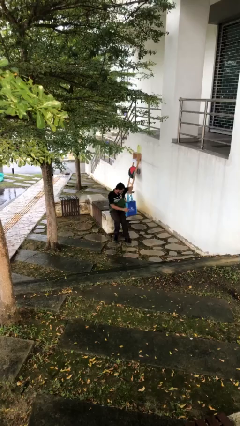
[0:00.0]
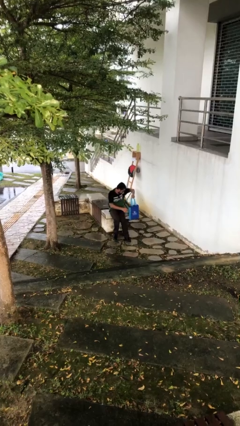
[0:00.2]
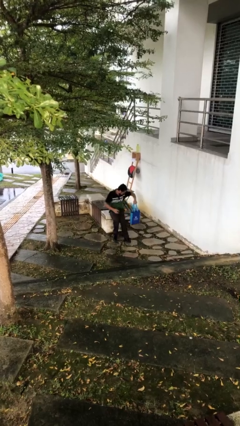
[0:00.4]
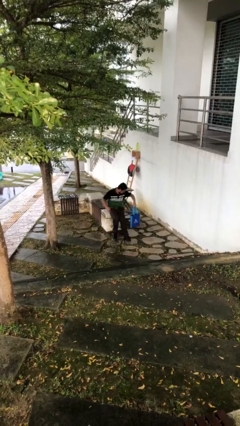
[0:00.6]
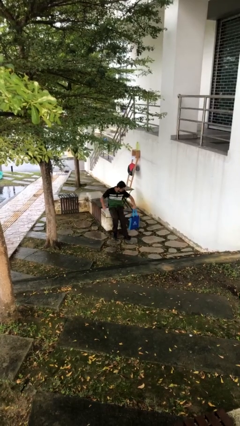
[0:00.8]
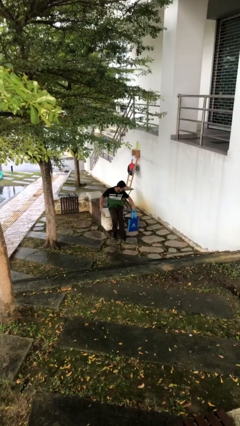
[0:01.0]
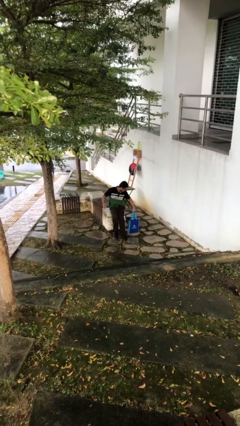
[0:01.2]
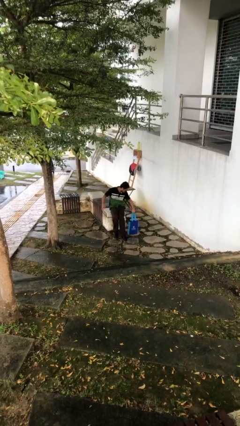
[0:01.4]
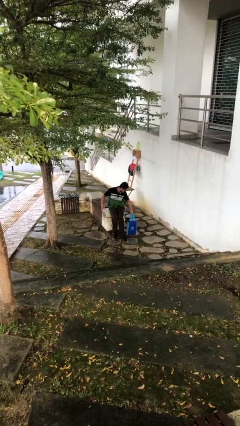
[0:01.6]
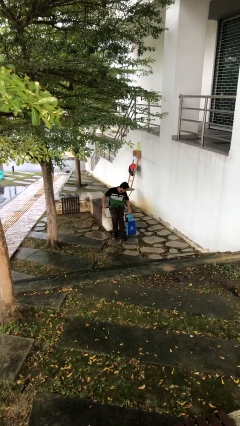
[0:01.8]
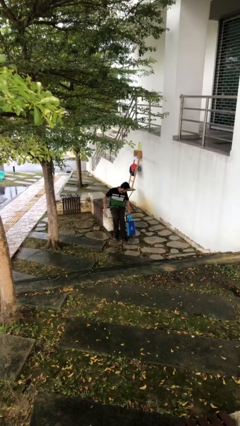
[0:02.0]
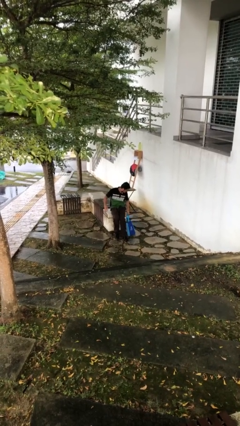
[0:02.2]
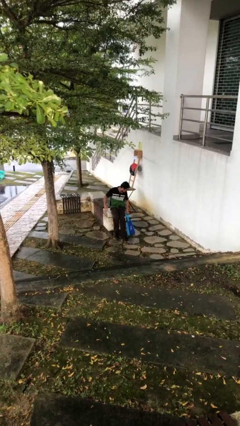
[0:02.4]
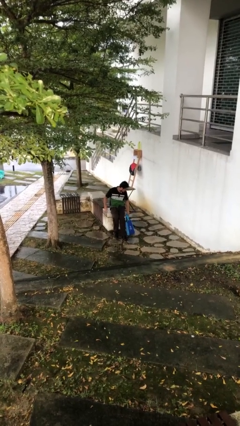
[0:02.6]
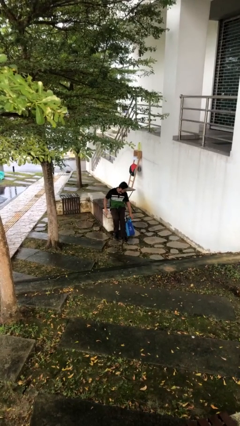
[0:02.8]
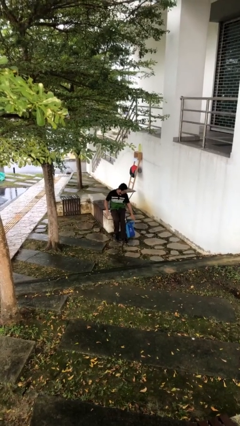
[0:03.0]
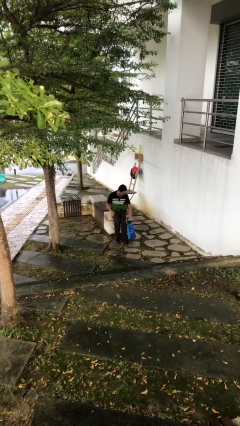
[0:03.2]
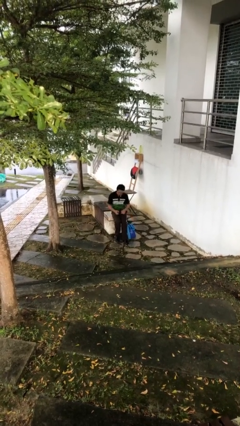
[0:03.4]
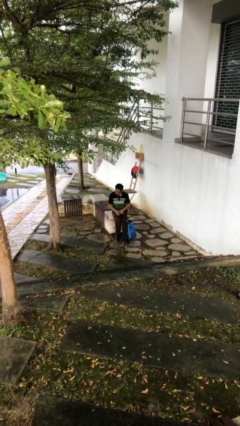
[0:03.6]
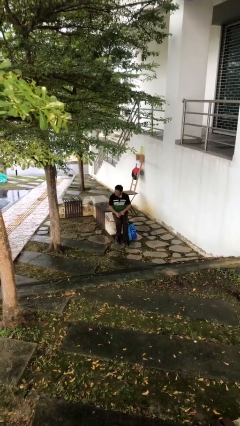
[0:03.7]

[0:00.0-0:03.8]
person puts down object on floor

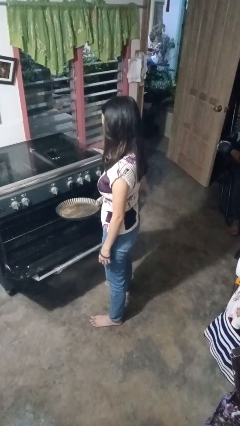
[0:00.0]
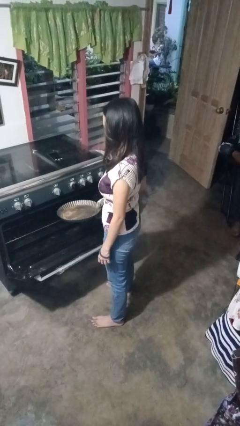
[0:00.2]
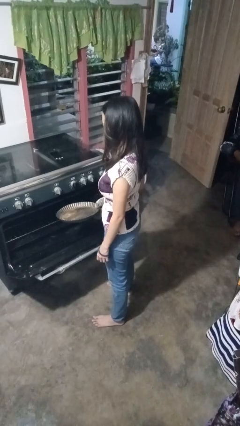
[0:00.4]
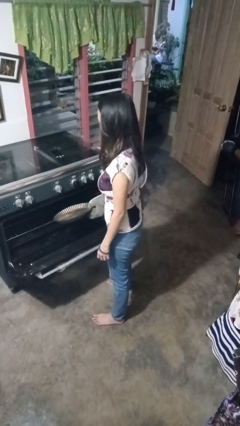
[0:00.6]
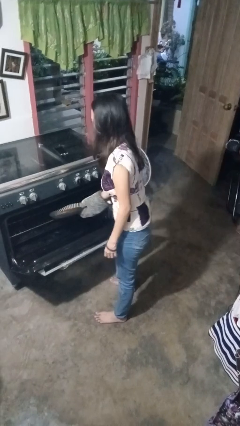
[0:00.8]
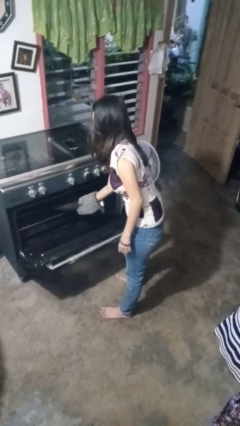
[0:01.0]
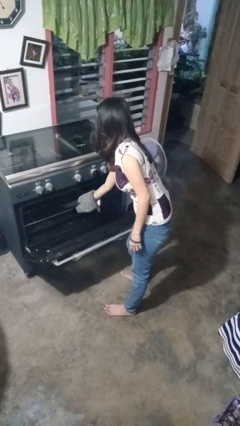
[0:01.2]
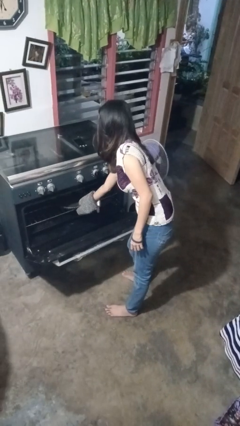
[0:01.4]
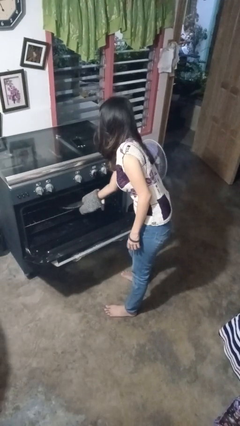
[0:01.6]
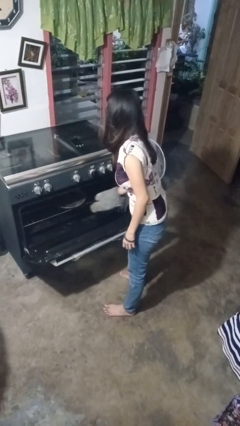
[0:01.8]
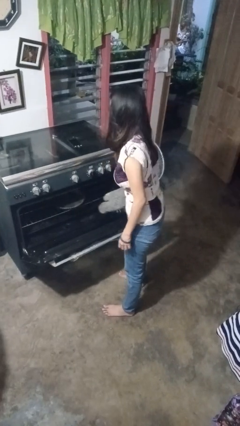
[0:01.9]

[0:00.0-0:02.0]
person puts object into oven

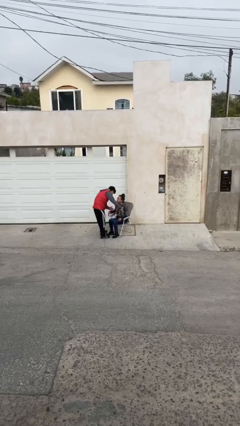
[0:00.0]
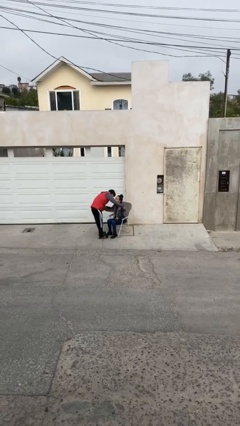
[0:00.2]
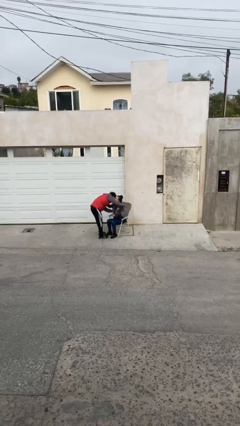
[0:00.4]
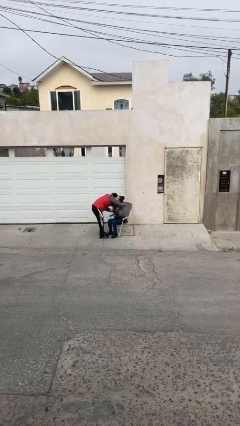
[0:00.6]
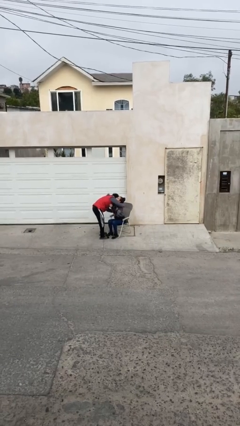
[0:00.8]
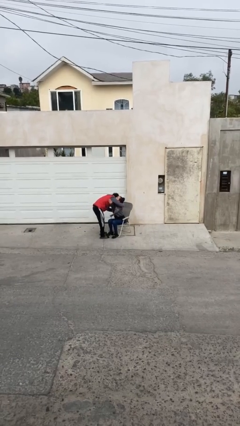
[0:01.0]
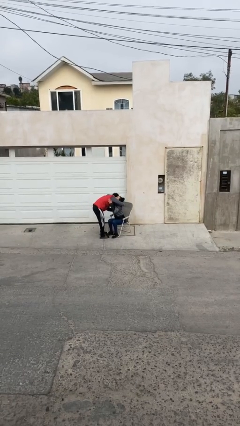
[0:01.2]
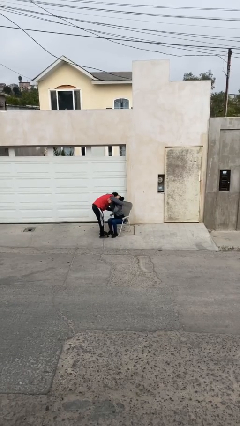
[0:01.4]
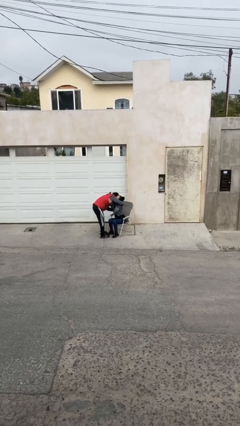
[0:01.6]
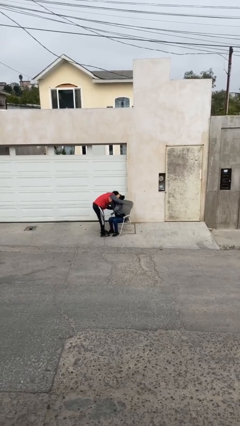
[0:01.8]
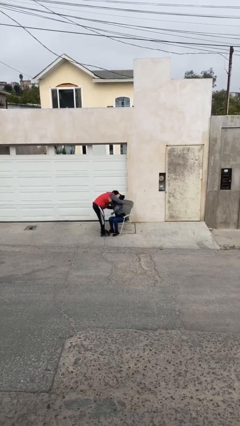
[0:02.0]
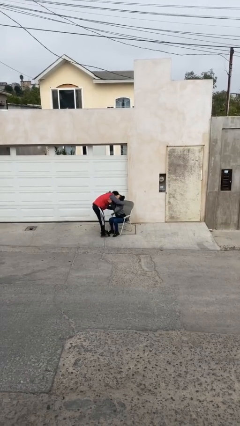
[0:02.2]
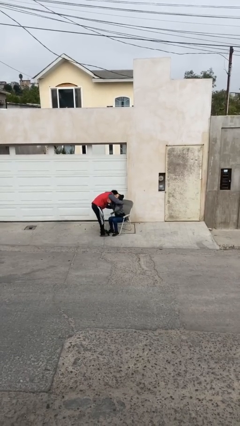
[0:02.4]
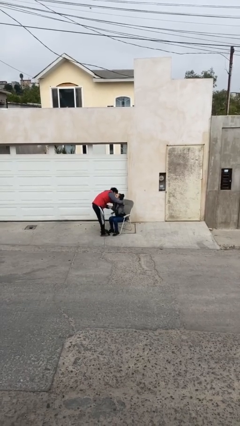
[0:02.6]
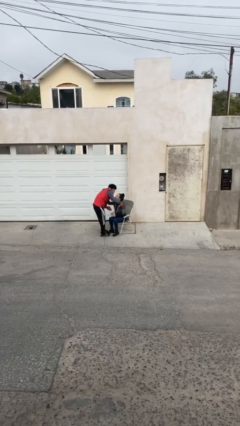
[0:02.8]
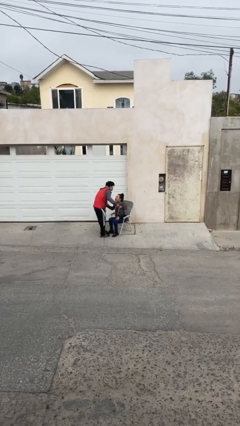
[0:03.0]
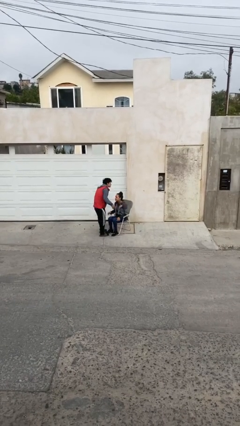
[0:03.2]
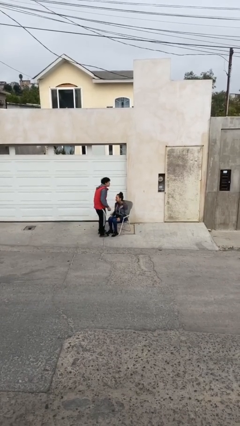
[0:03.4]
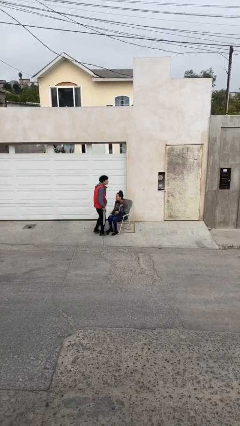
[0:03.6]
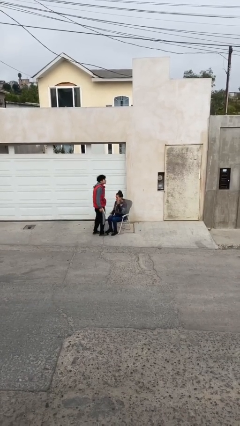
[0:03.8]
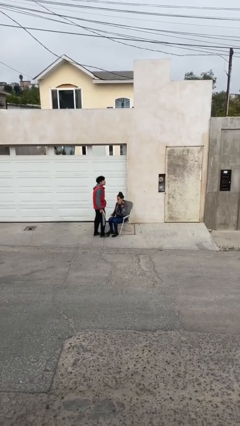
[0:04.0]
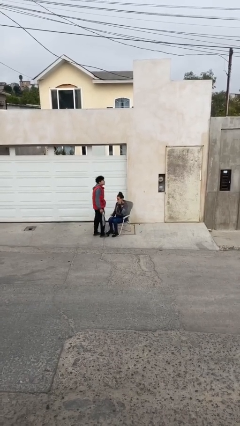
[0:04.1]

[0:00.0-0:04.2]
person embraces person

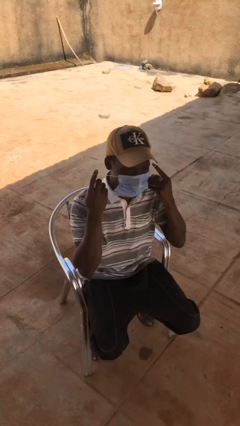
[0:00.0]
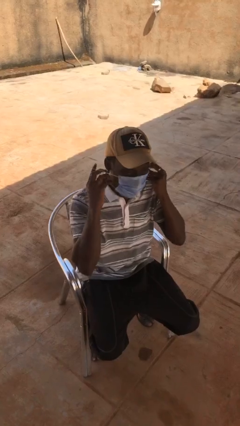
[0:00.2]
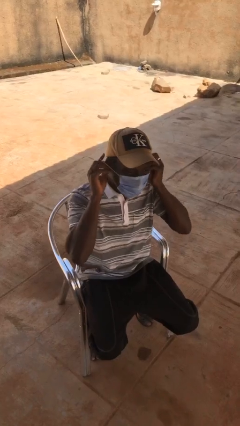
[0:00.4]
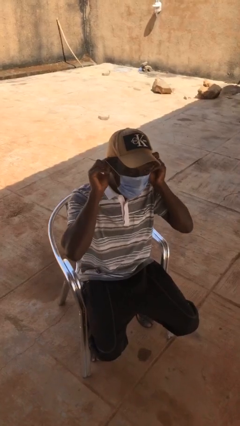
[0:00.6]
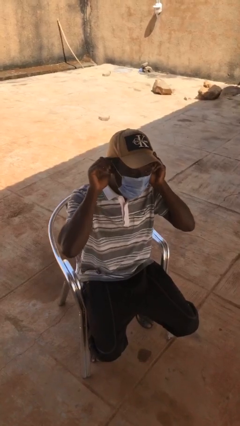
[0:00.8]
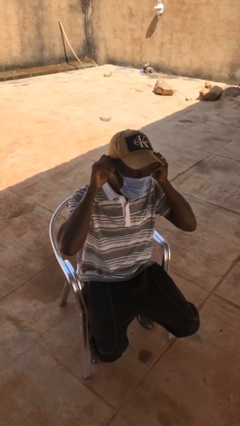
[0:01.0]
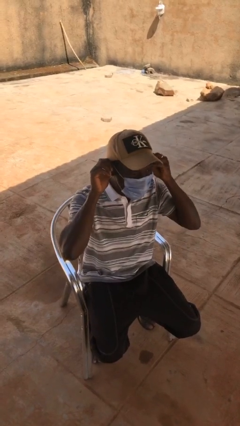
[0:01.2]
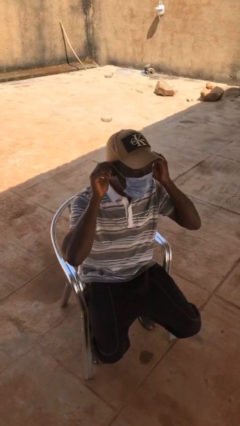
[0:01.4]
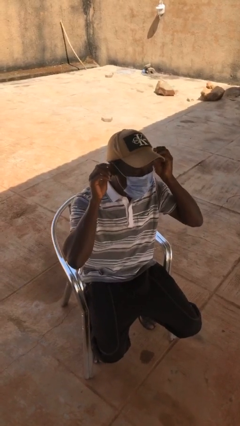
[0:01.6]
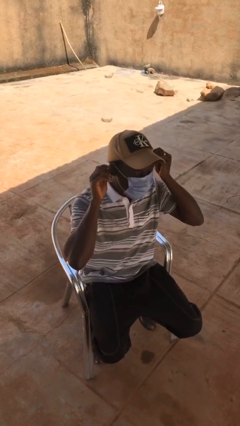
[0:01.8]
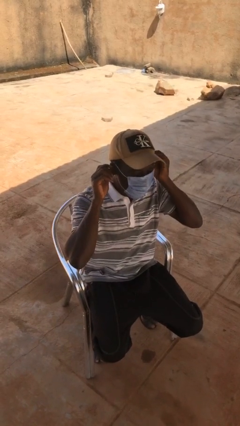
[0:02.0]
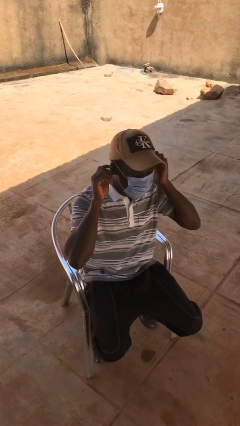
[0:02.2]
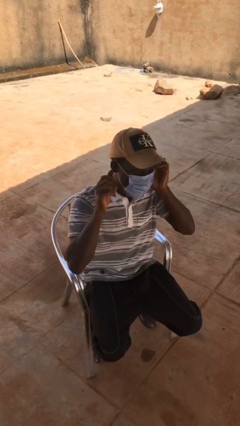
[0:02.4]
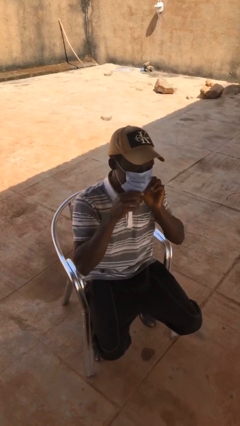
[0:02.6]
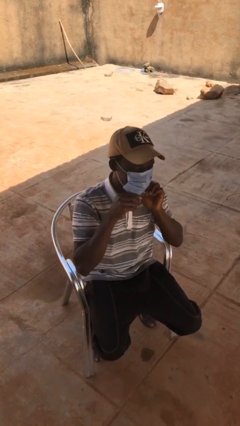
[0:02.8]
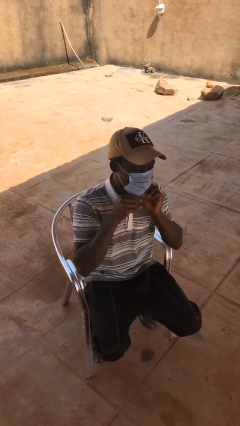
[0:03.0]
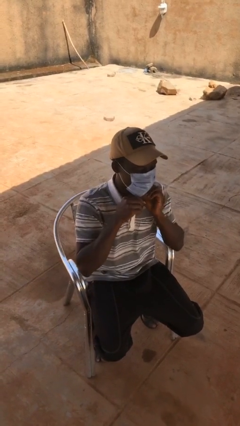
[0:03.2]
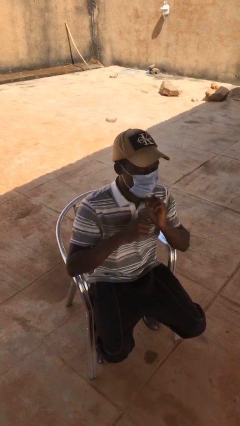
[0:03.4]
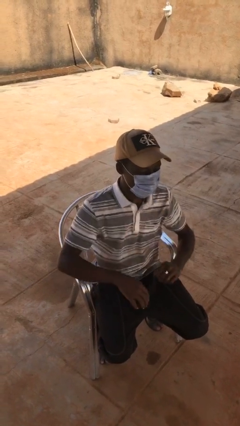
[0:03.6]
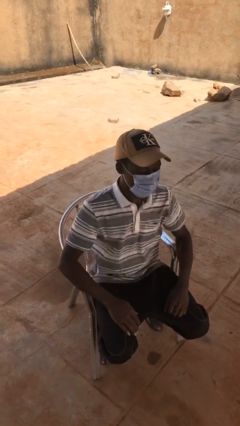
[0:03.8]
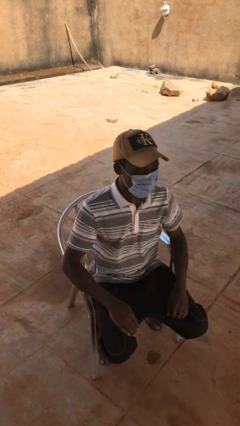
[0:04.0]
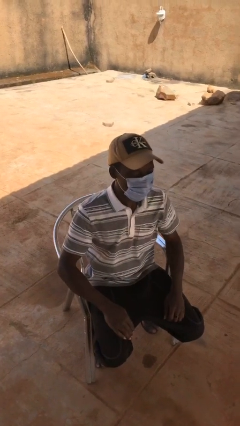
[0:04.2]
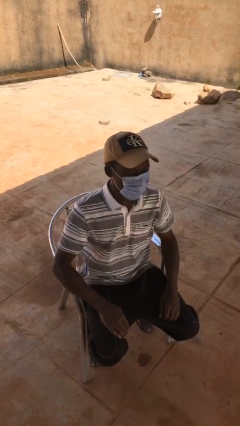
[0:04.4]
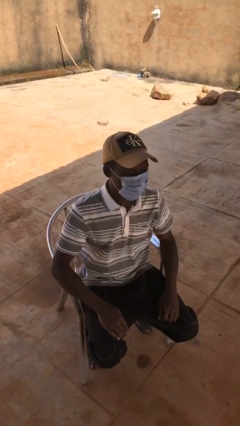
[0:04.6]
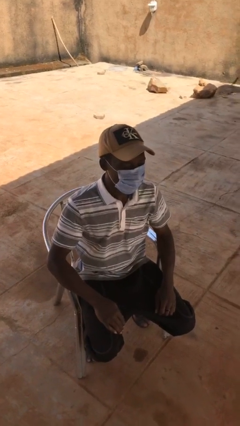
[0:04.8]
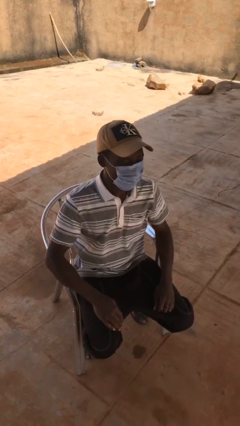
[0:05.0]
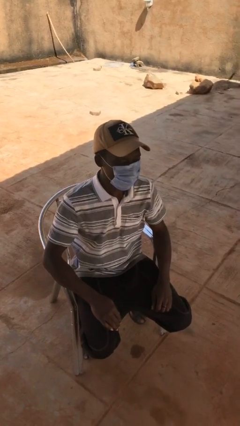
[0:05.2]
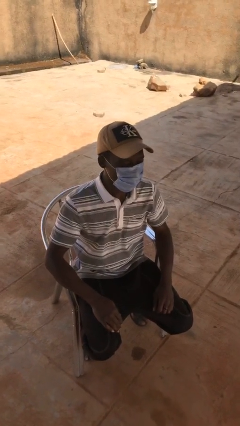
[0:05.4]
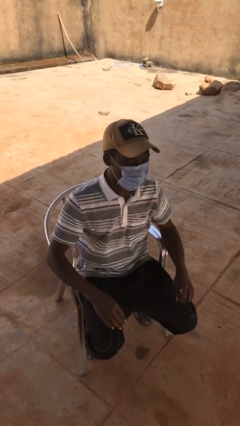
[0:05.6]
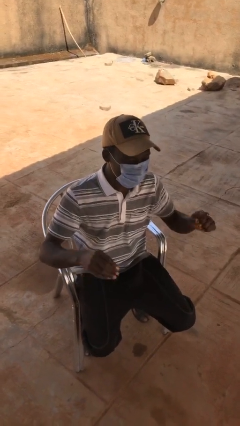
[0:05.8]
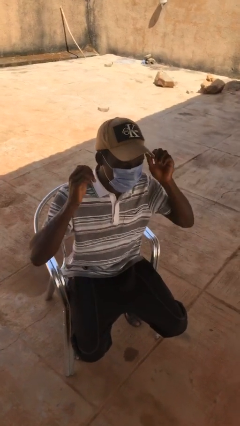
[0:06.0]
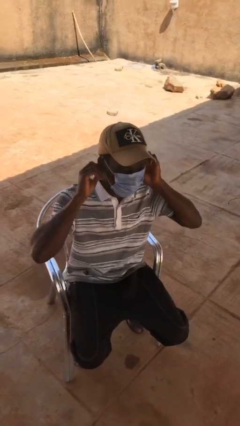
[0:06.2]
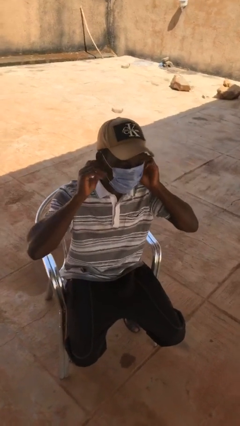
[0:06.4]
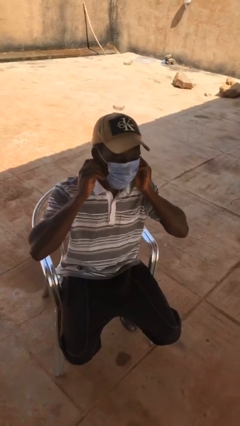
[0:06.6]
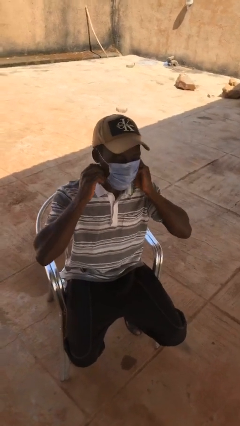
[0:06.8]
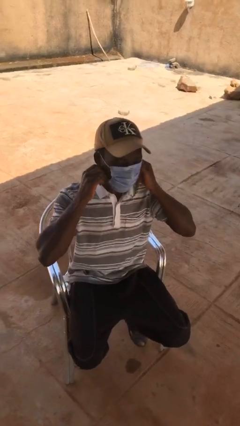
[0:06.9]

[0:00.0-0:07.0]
person puts on facemask

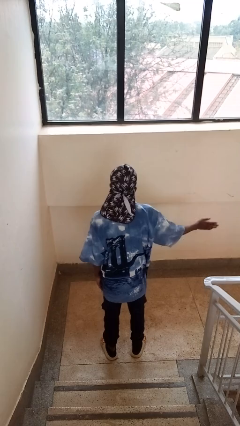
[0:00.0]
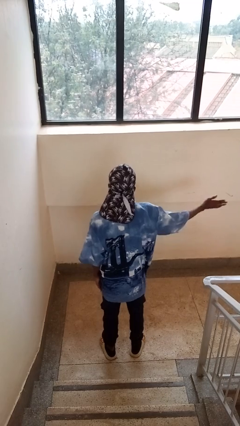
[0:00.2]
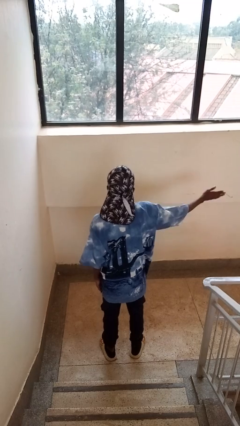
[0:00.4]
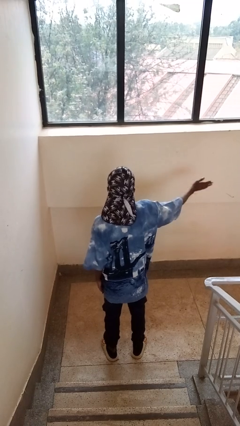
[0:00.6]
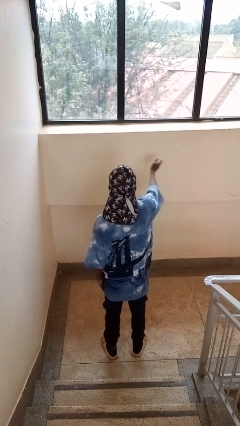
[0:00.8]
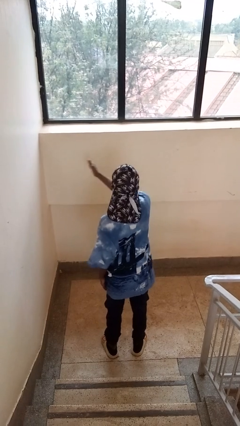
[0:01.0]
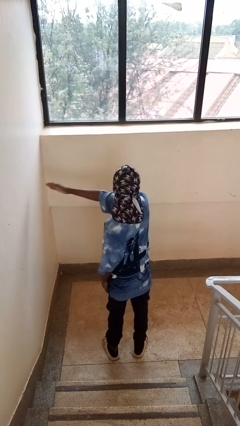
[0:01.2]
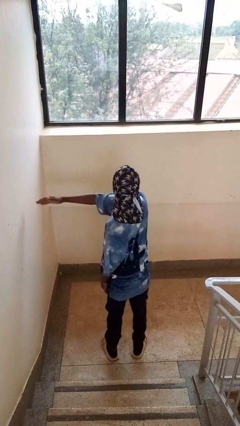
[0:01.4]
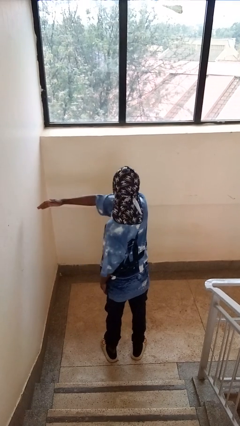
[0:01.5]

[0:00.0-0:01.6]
person gestures swipe left
